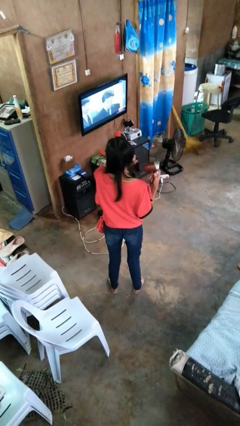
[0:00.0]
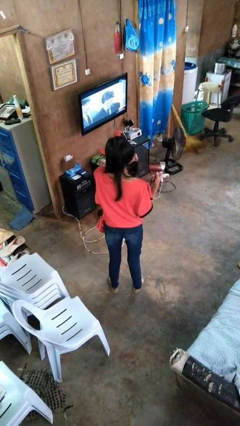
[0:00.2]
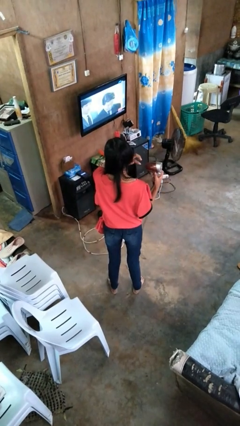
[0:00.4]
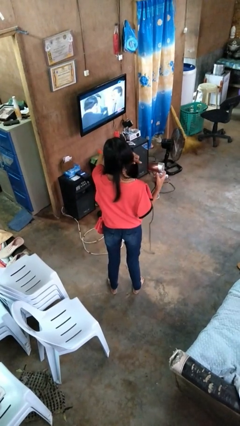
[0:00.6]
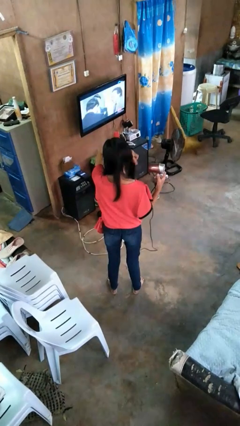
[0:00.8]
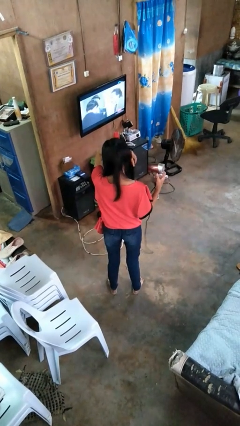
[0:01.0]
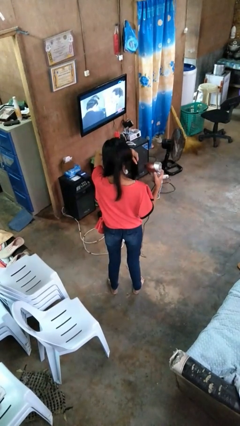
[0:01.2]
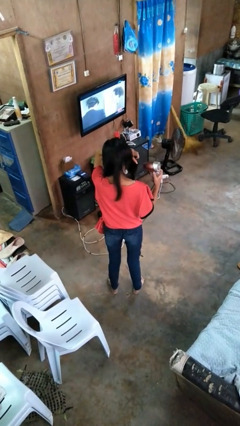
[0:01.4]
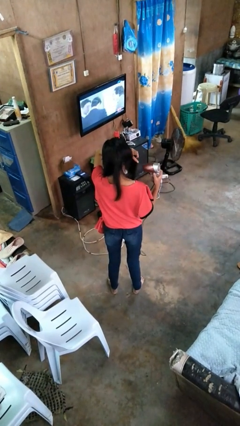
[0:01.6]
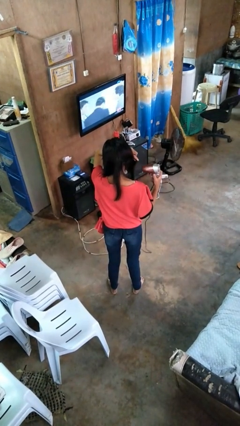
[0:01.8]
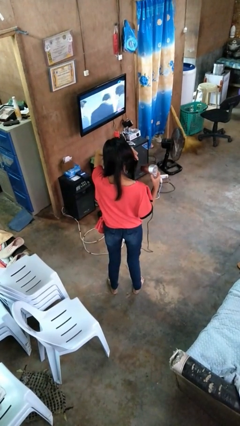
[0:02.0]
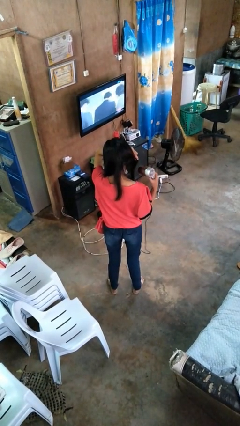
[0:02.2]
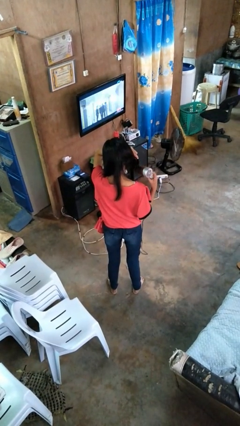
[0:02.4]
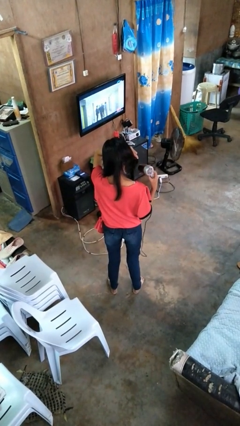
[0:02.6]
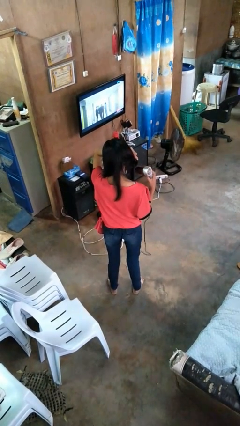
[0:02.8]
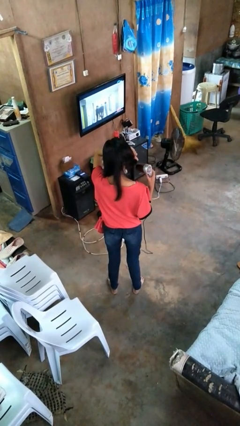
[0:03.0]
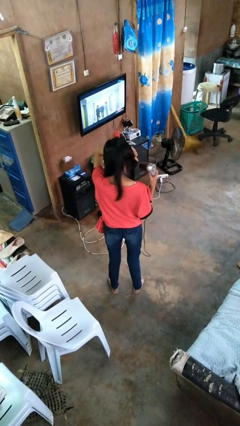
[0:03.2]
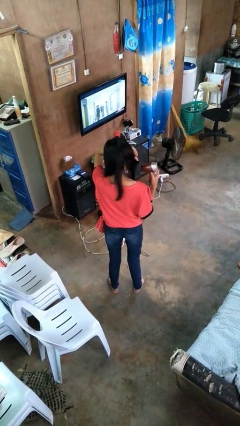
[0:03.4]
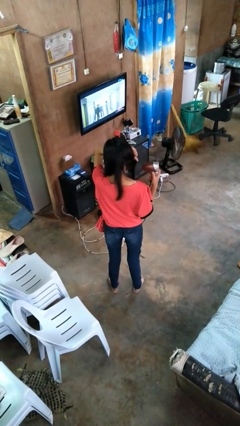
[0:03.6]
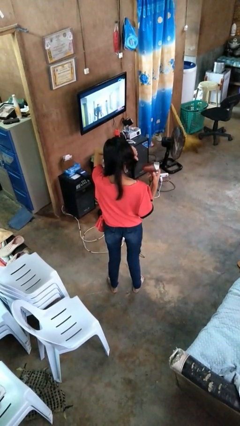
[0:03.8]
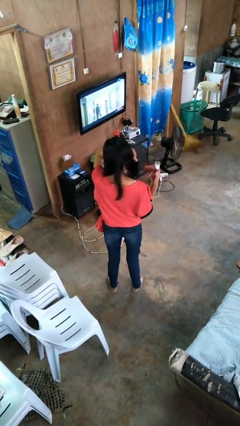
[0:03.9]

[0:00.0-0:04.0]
person dries hair with hairdryer

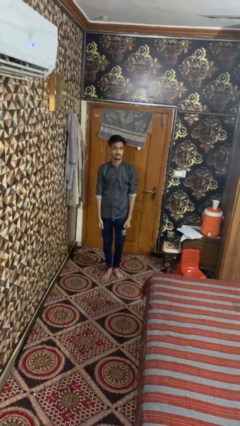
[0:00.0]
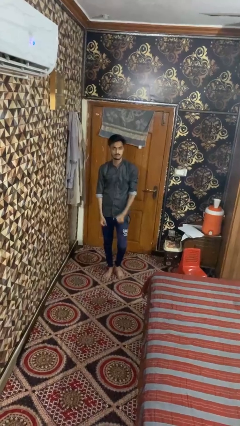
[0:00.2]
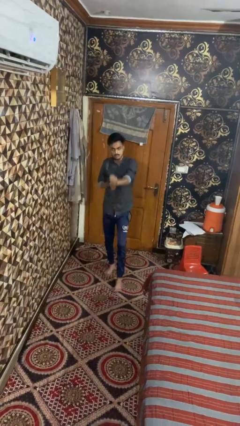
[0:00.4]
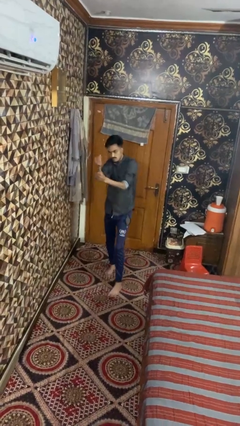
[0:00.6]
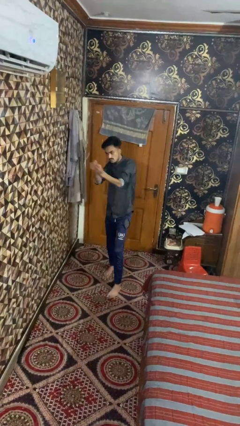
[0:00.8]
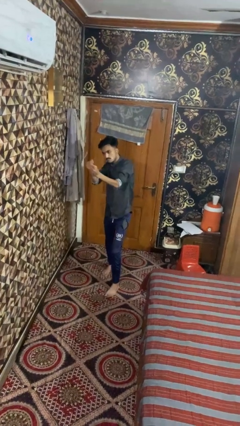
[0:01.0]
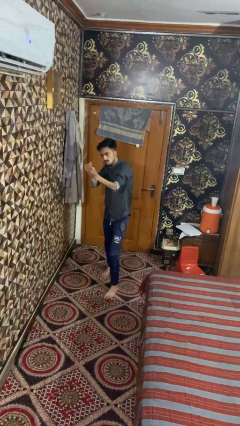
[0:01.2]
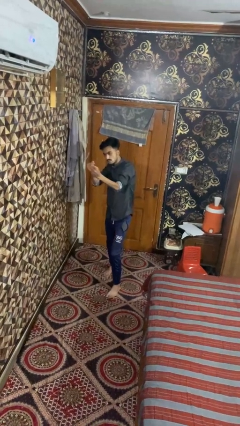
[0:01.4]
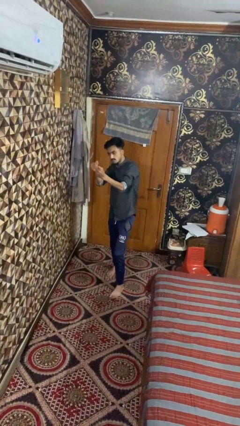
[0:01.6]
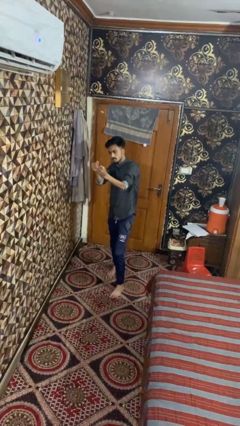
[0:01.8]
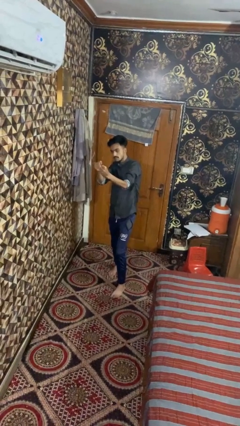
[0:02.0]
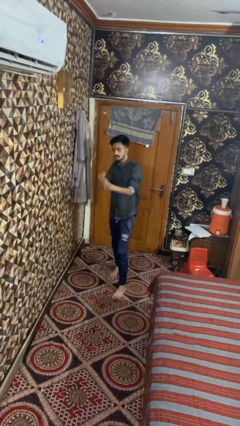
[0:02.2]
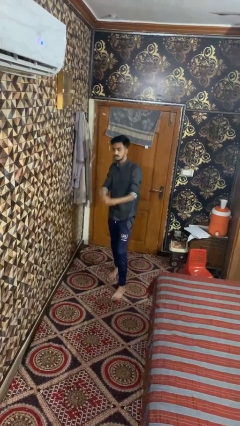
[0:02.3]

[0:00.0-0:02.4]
person punches

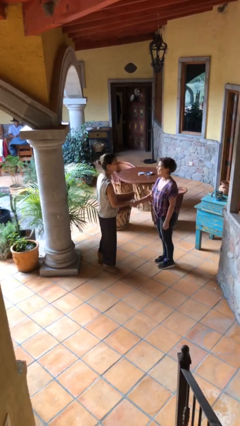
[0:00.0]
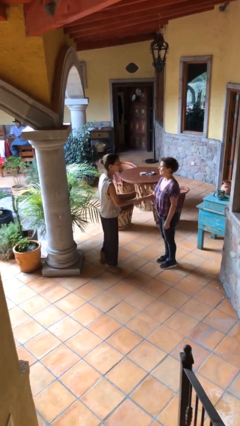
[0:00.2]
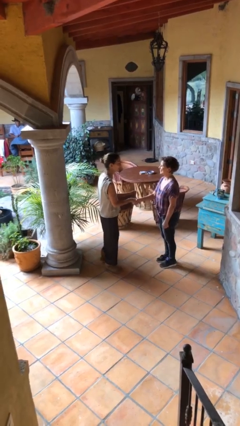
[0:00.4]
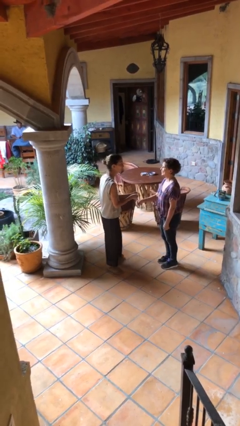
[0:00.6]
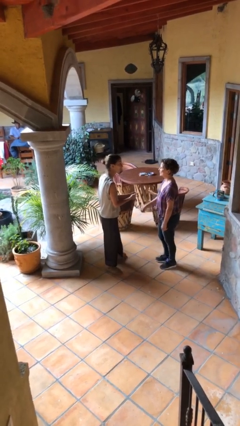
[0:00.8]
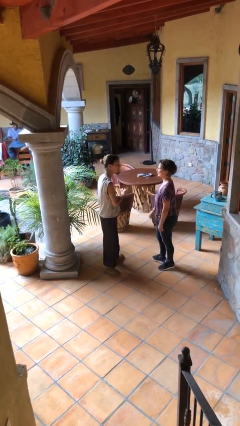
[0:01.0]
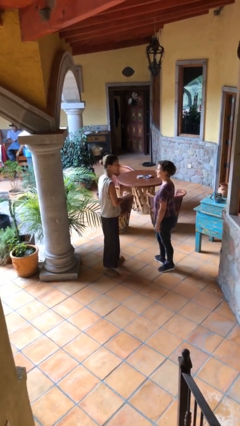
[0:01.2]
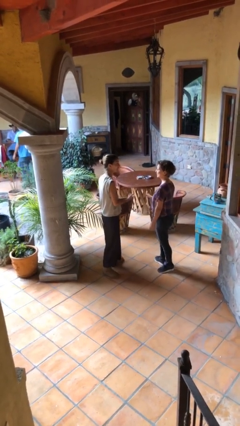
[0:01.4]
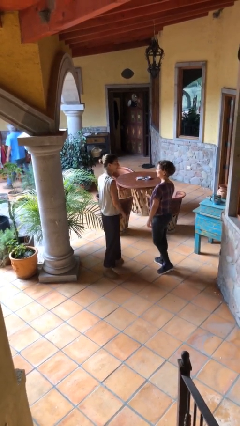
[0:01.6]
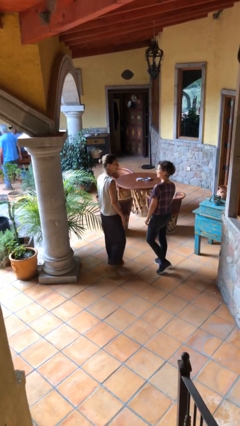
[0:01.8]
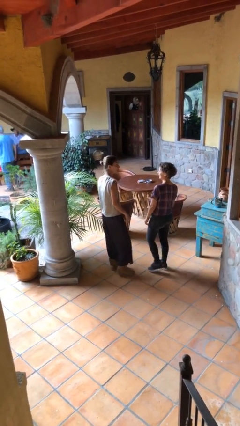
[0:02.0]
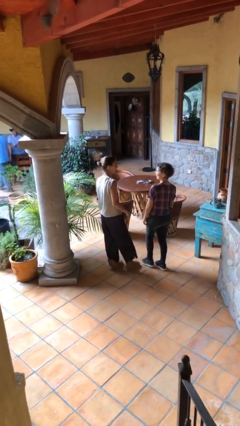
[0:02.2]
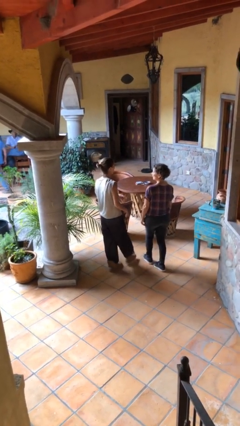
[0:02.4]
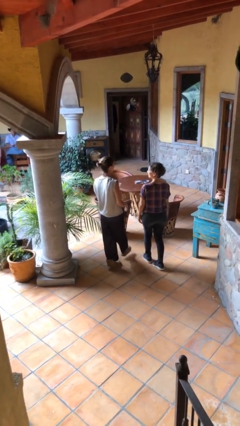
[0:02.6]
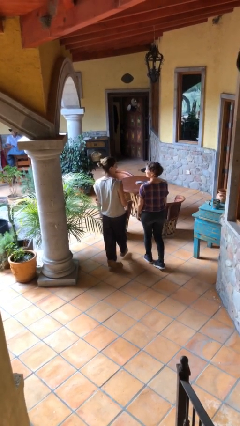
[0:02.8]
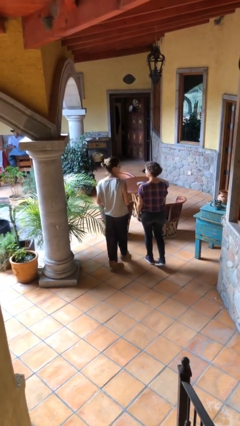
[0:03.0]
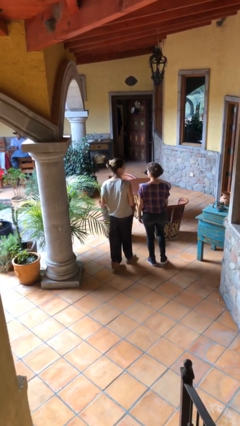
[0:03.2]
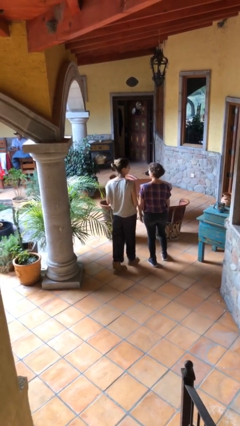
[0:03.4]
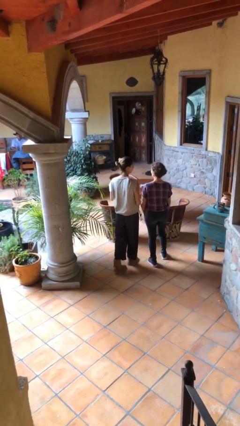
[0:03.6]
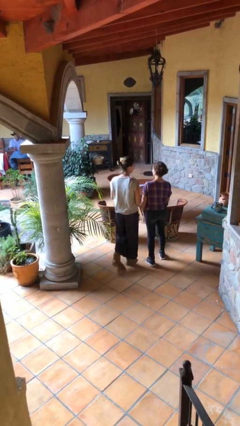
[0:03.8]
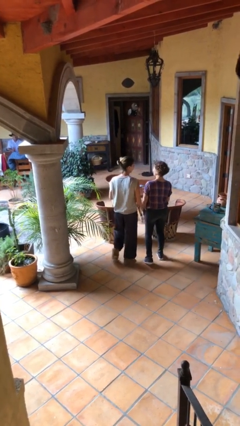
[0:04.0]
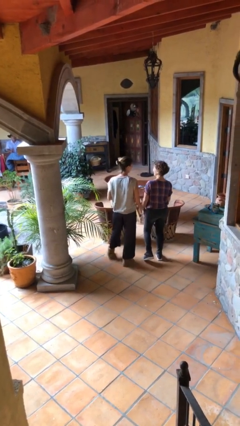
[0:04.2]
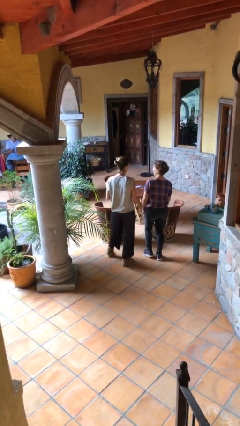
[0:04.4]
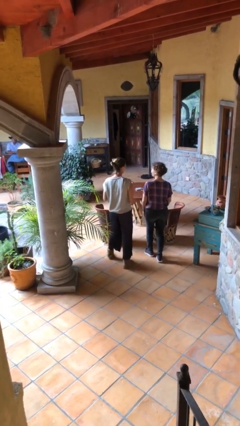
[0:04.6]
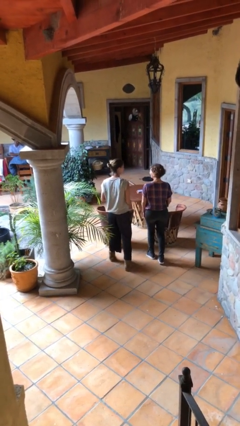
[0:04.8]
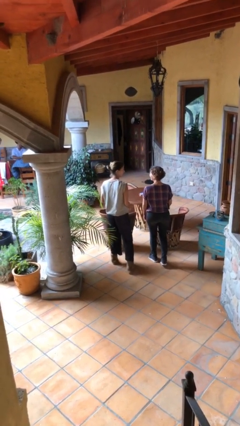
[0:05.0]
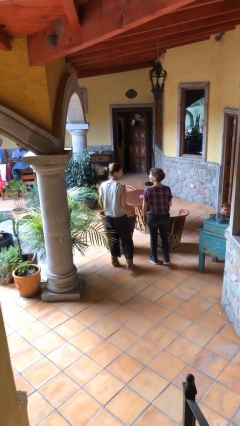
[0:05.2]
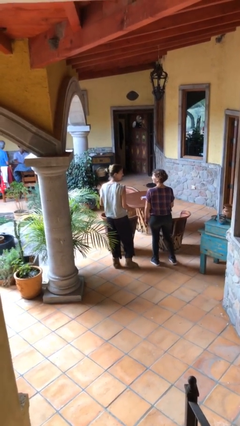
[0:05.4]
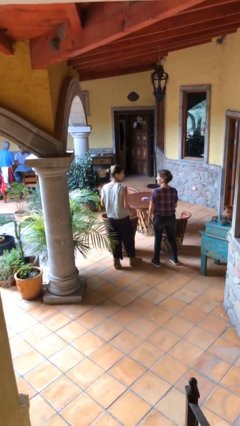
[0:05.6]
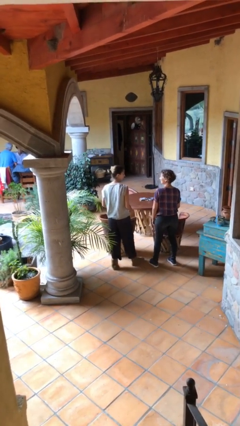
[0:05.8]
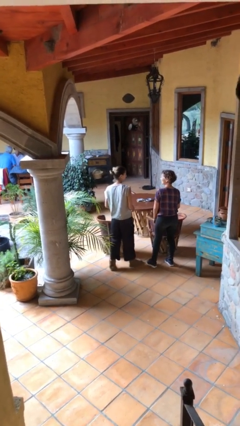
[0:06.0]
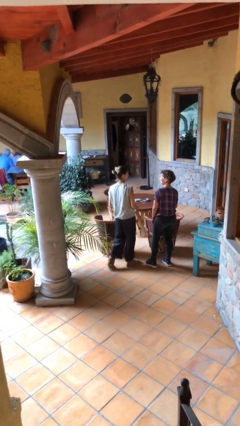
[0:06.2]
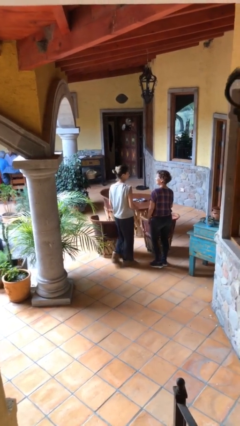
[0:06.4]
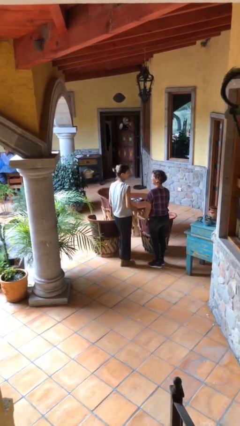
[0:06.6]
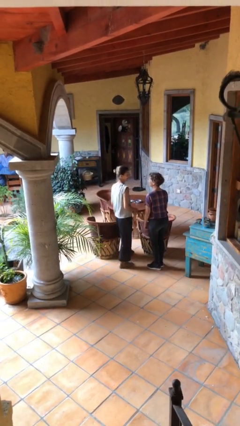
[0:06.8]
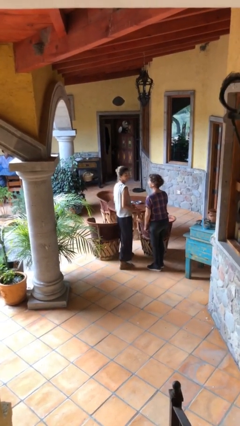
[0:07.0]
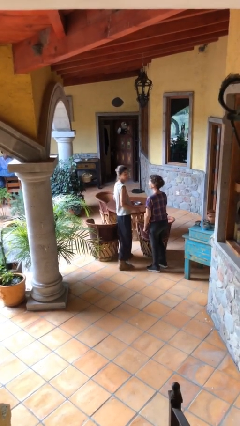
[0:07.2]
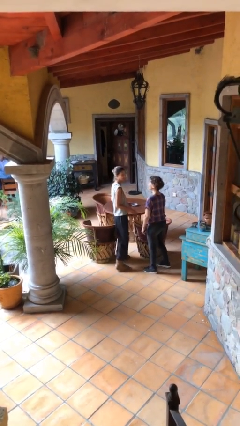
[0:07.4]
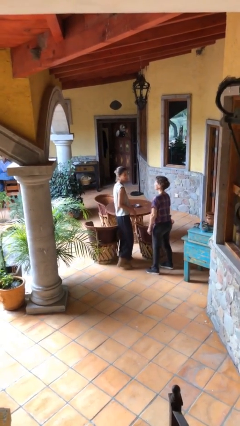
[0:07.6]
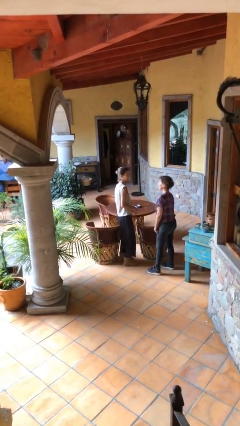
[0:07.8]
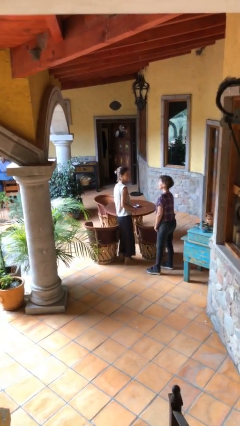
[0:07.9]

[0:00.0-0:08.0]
person talks to person

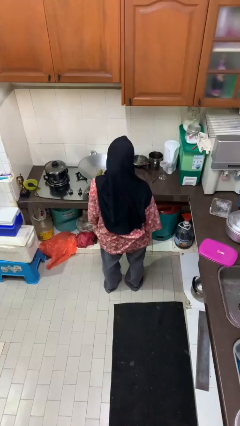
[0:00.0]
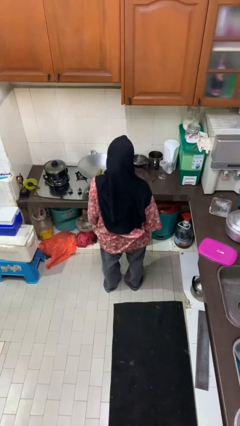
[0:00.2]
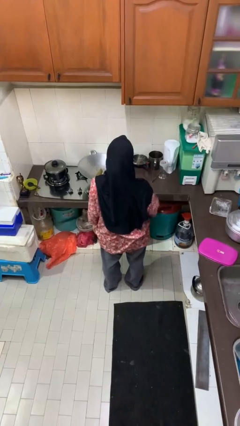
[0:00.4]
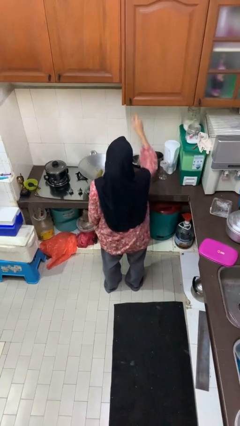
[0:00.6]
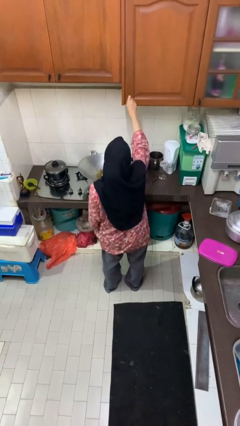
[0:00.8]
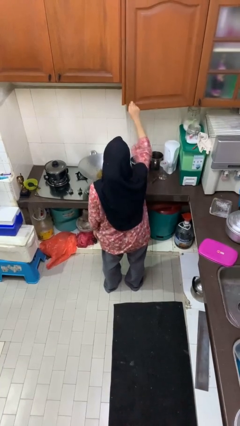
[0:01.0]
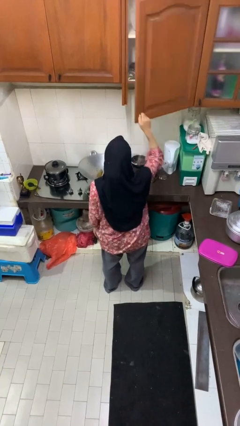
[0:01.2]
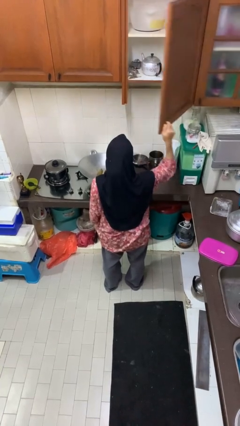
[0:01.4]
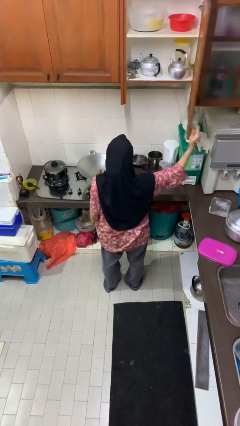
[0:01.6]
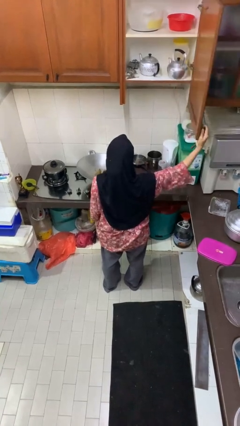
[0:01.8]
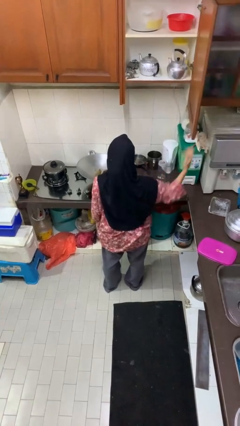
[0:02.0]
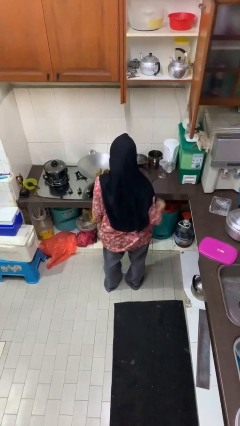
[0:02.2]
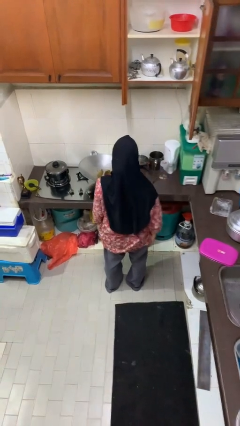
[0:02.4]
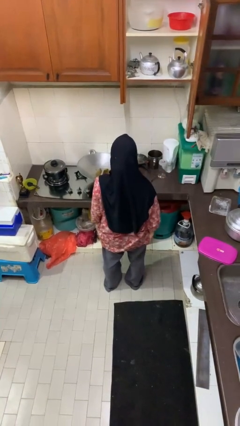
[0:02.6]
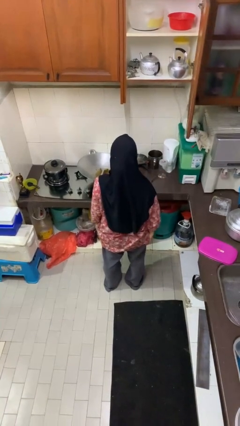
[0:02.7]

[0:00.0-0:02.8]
person opens cabinet

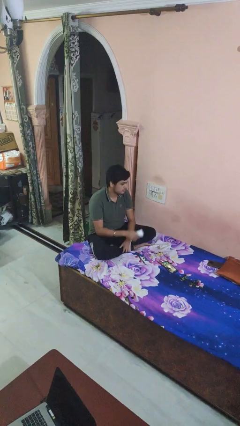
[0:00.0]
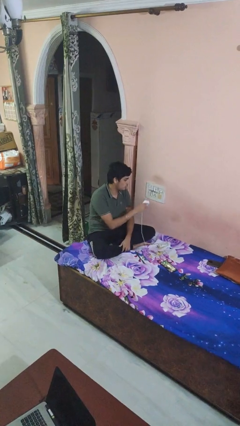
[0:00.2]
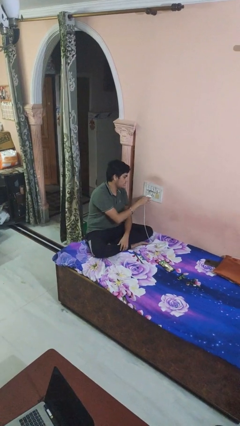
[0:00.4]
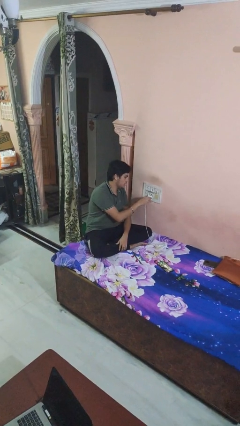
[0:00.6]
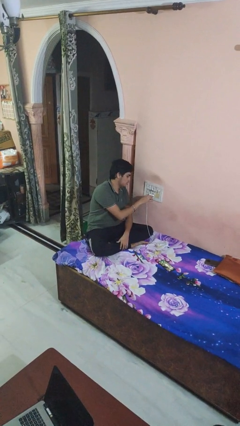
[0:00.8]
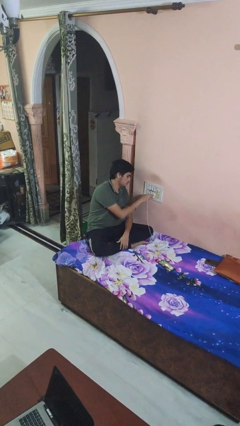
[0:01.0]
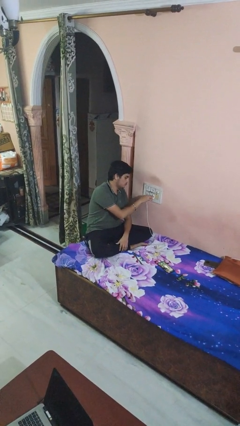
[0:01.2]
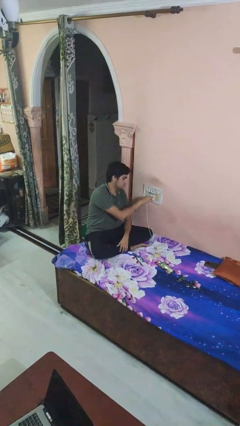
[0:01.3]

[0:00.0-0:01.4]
person plugs into electrical socket
